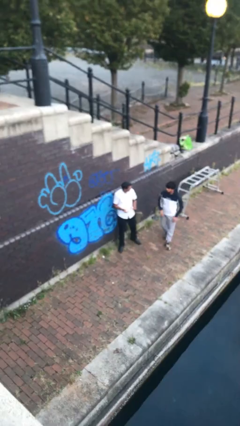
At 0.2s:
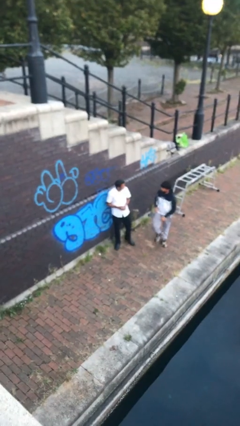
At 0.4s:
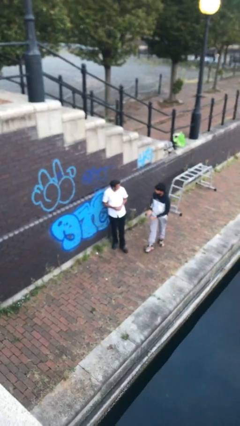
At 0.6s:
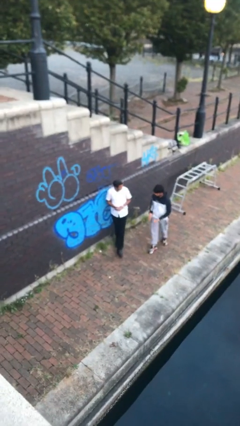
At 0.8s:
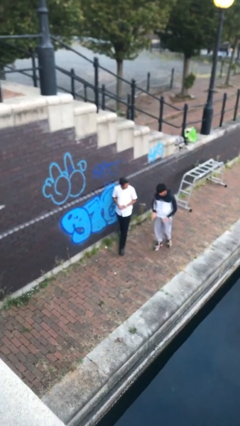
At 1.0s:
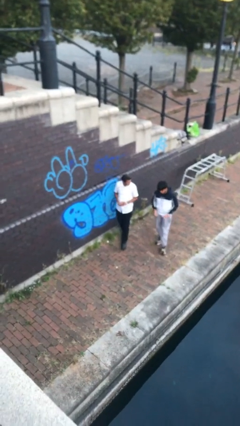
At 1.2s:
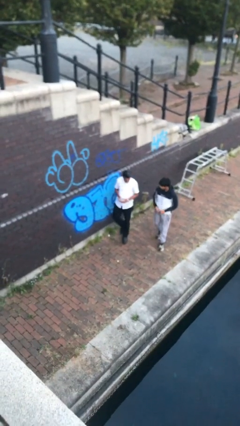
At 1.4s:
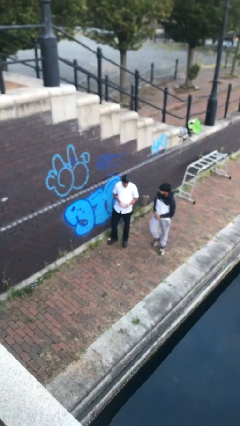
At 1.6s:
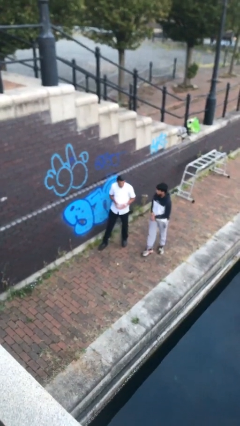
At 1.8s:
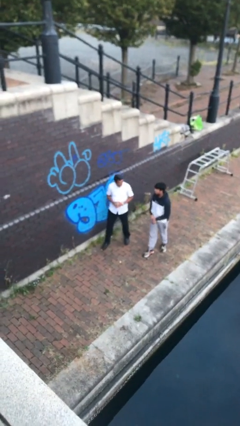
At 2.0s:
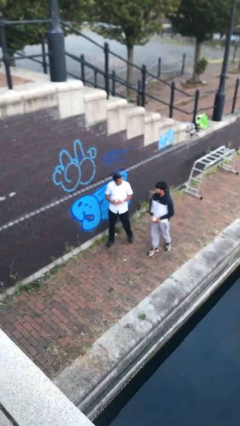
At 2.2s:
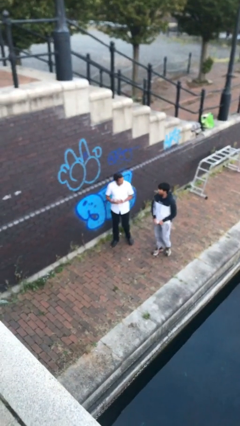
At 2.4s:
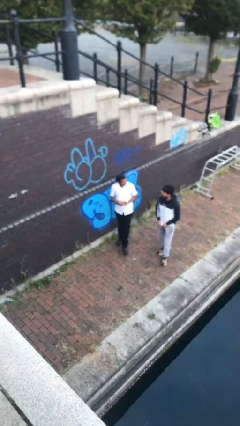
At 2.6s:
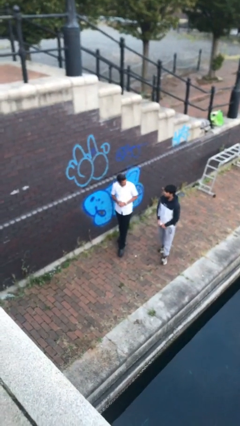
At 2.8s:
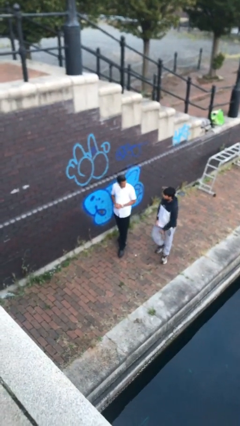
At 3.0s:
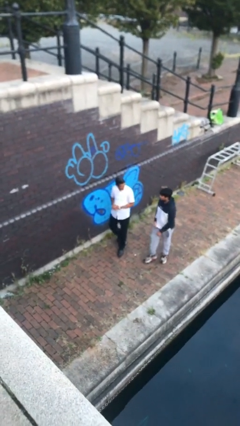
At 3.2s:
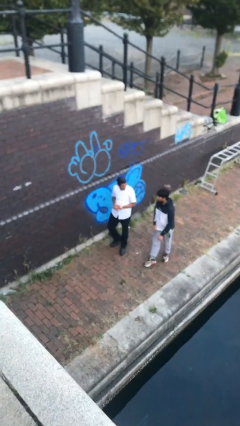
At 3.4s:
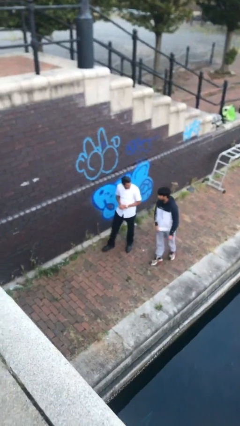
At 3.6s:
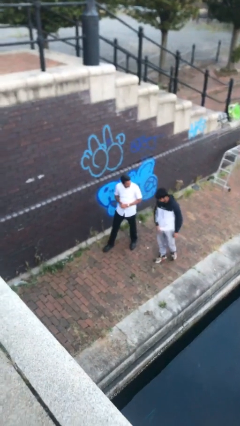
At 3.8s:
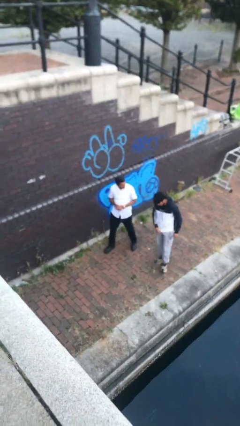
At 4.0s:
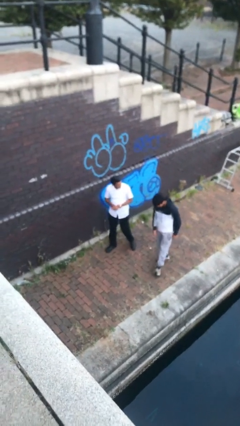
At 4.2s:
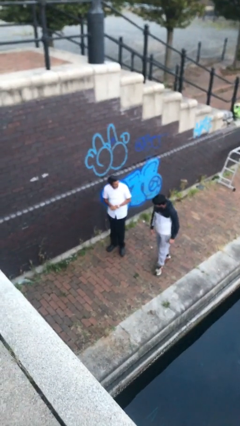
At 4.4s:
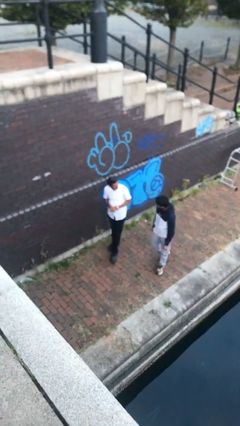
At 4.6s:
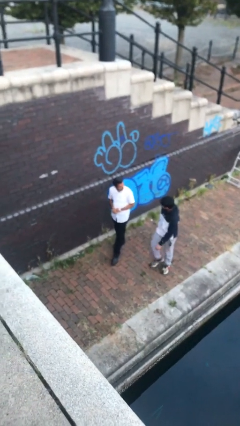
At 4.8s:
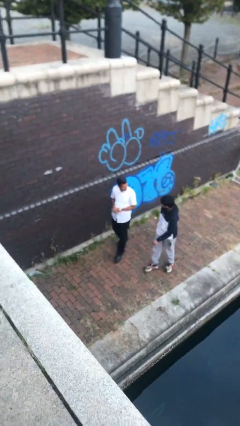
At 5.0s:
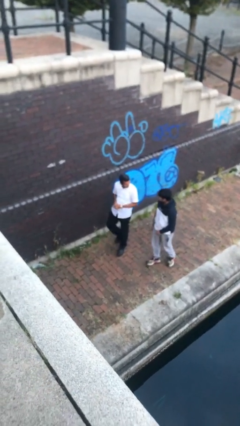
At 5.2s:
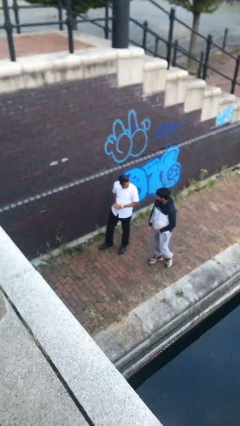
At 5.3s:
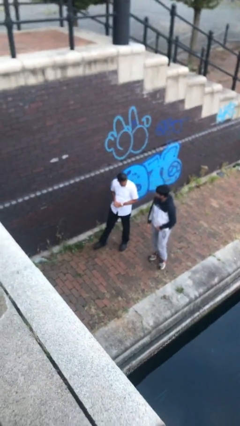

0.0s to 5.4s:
person talks to person

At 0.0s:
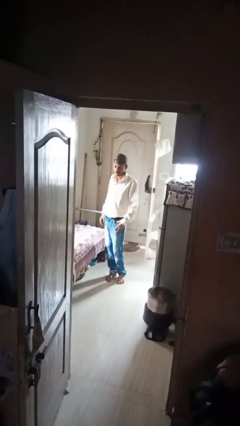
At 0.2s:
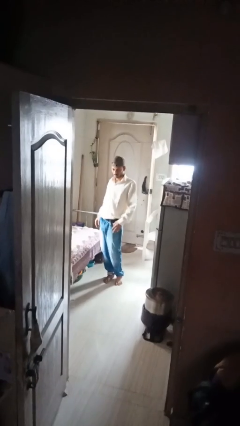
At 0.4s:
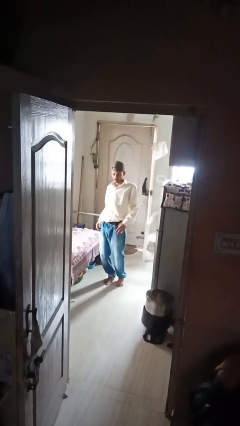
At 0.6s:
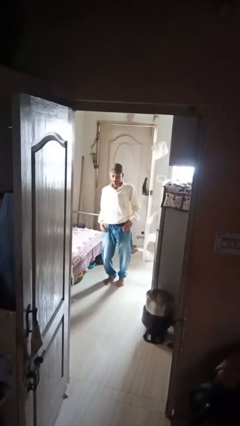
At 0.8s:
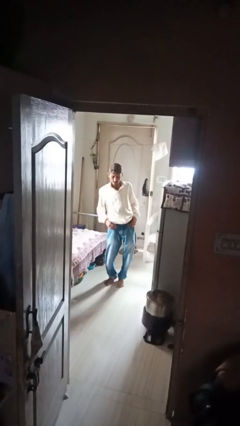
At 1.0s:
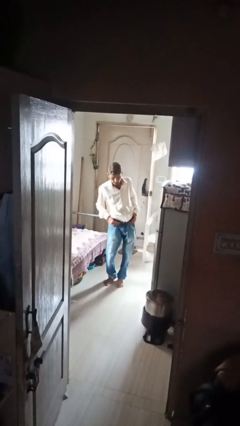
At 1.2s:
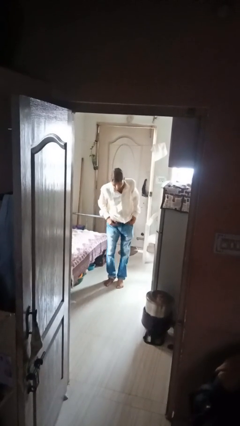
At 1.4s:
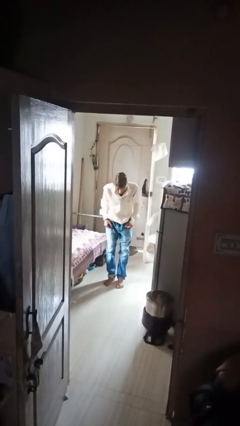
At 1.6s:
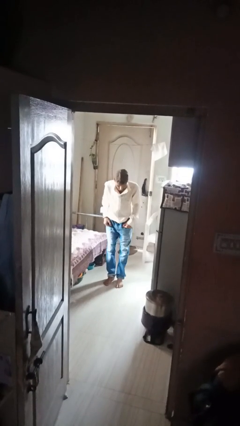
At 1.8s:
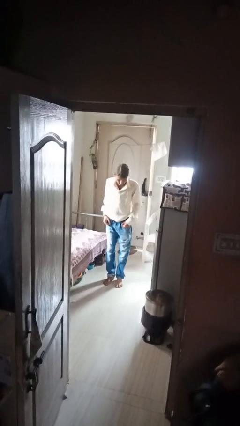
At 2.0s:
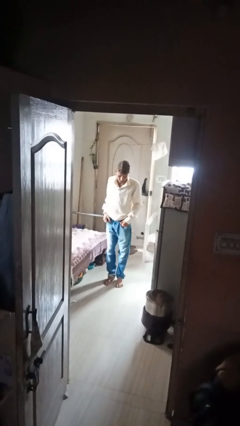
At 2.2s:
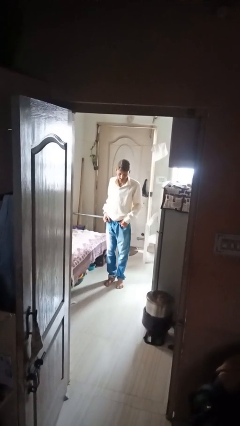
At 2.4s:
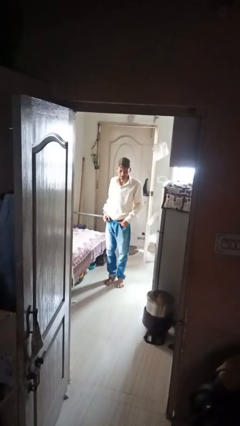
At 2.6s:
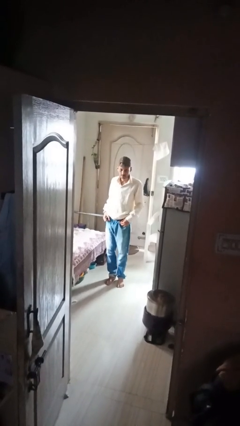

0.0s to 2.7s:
person wiggles hips

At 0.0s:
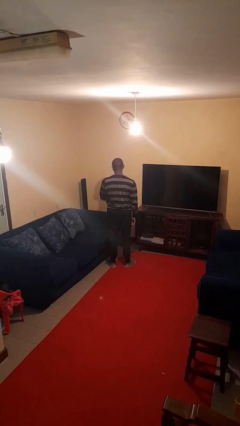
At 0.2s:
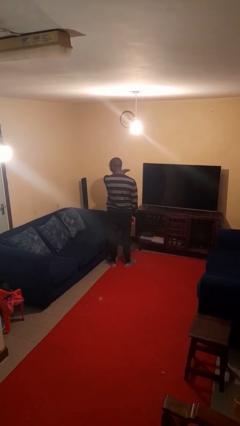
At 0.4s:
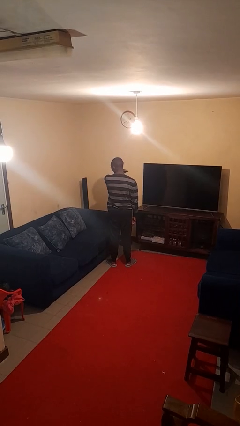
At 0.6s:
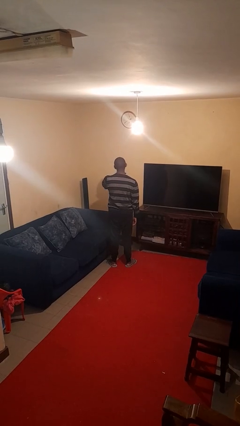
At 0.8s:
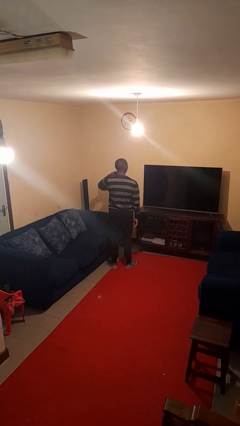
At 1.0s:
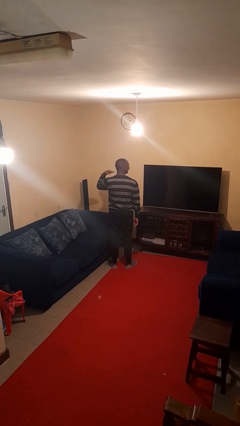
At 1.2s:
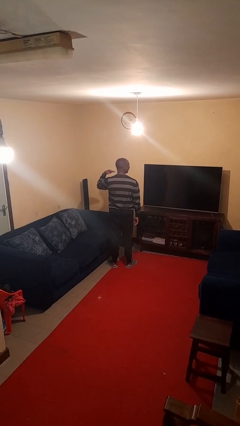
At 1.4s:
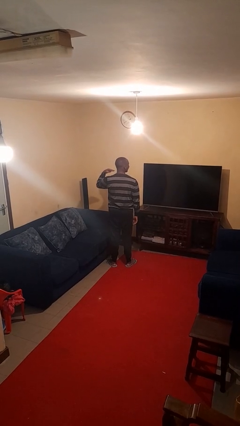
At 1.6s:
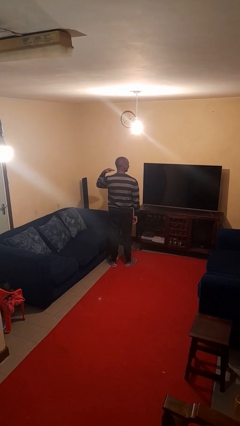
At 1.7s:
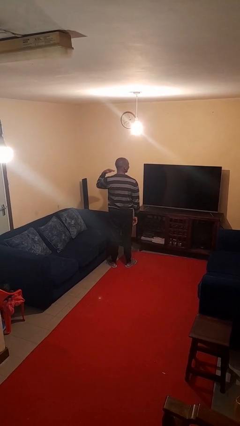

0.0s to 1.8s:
person gestures cut

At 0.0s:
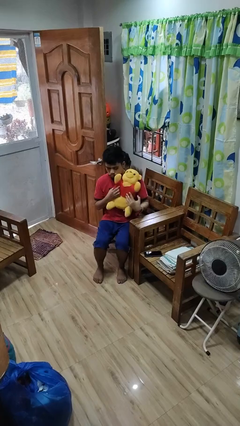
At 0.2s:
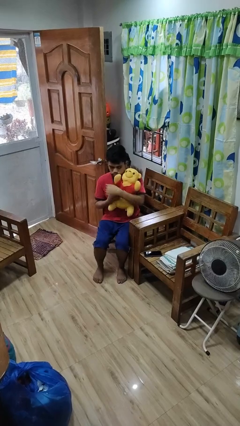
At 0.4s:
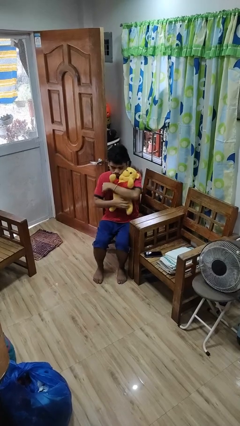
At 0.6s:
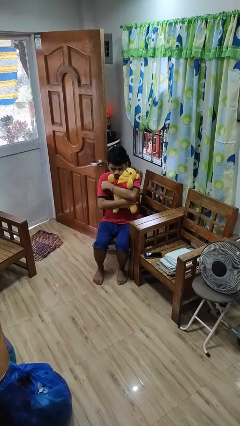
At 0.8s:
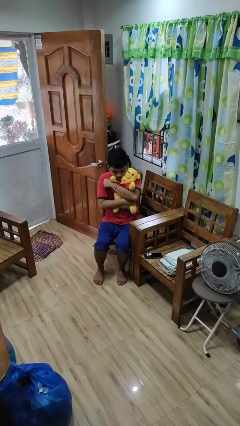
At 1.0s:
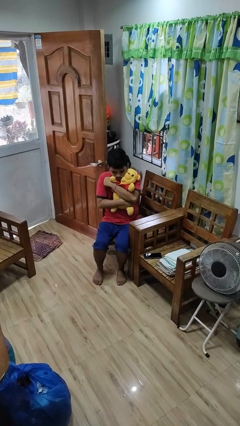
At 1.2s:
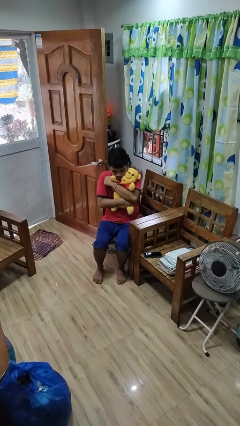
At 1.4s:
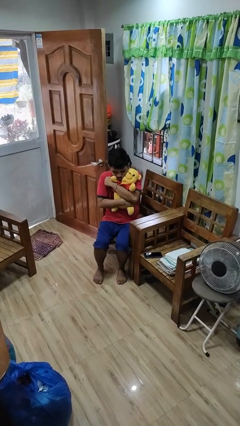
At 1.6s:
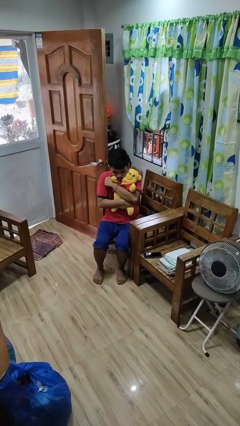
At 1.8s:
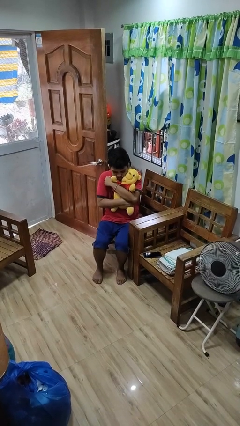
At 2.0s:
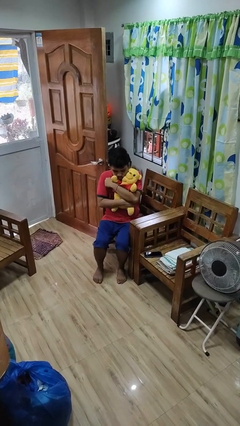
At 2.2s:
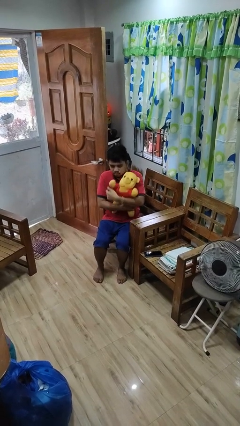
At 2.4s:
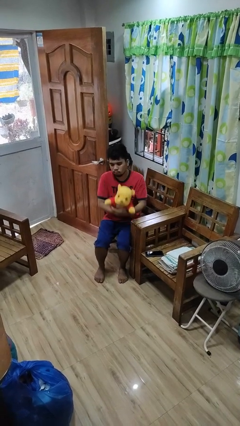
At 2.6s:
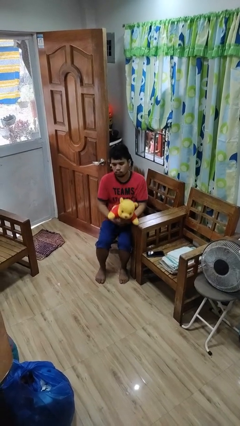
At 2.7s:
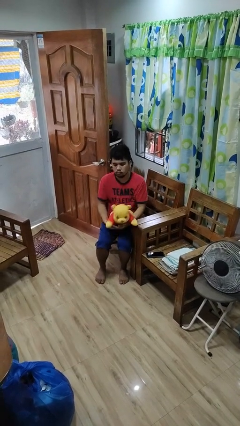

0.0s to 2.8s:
person hugs stuffed animal

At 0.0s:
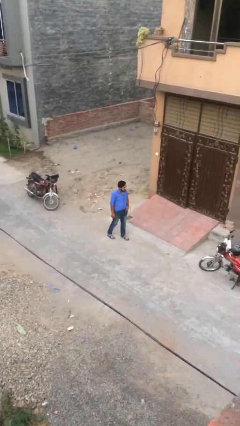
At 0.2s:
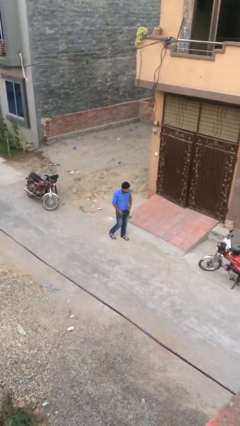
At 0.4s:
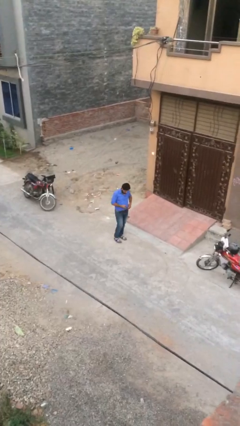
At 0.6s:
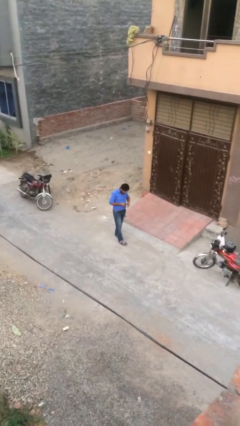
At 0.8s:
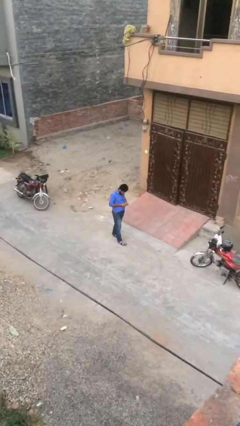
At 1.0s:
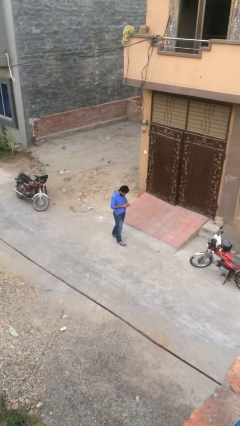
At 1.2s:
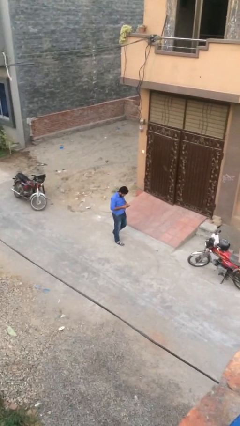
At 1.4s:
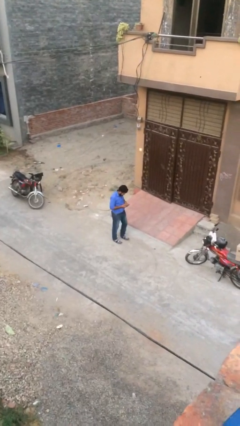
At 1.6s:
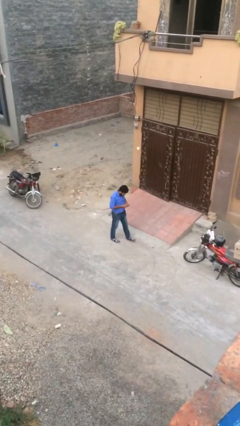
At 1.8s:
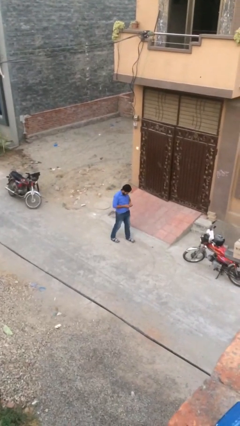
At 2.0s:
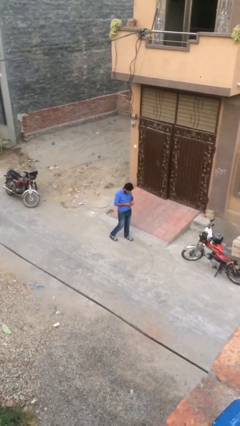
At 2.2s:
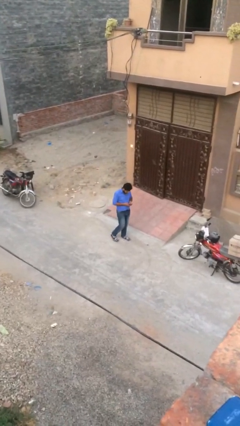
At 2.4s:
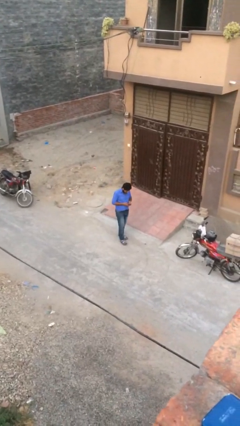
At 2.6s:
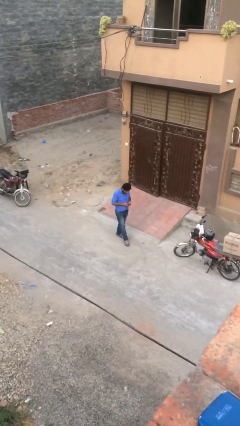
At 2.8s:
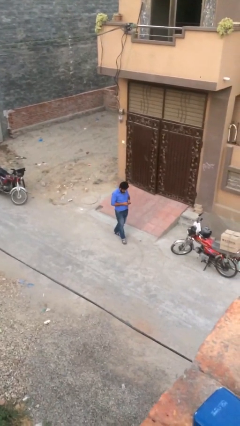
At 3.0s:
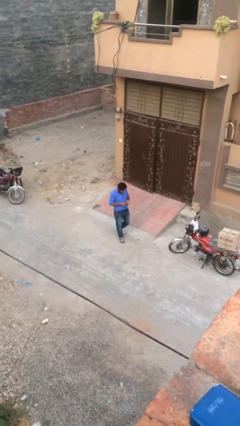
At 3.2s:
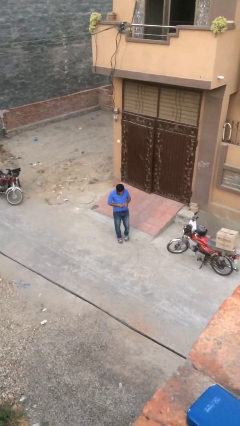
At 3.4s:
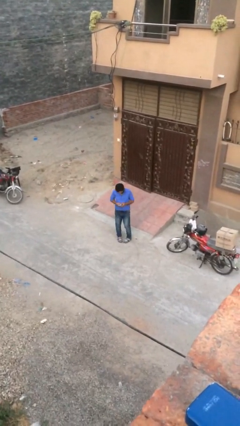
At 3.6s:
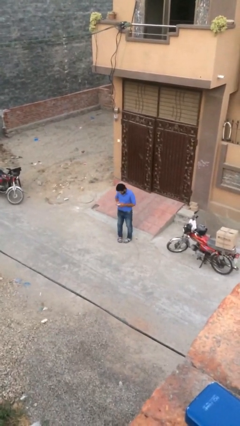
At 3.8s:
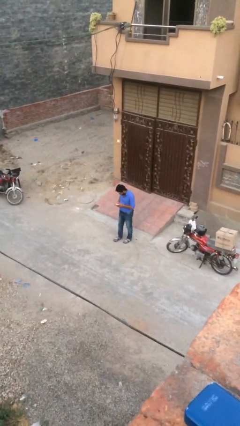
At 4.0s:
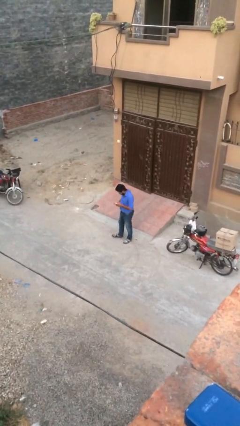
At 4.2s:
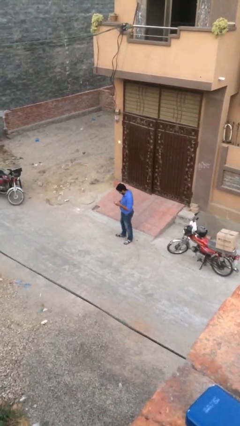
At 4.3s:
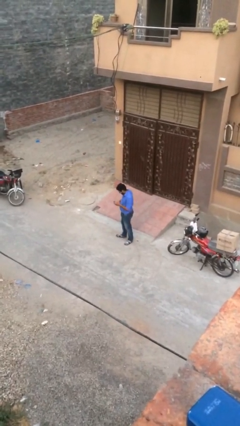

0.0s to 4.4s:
person texts on phone

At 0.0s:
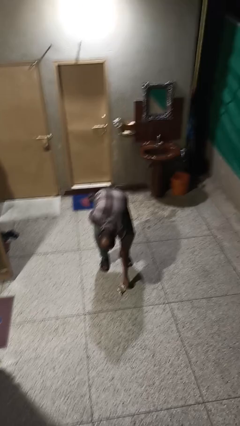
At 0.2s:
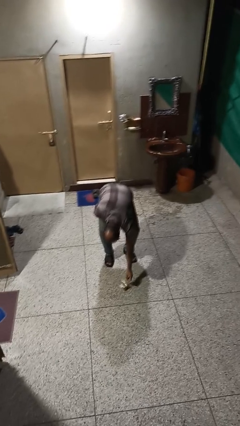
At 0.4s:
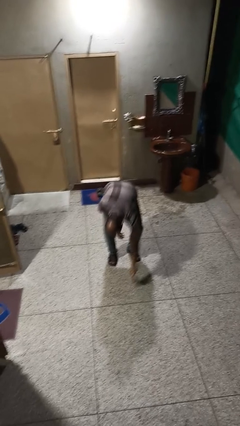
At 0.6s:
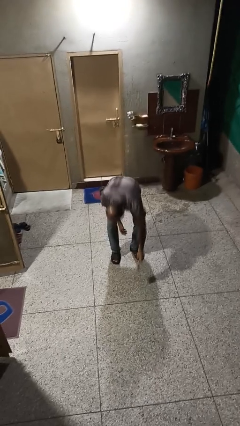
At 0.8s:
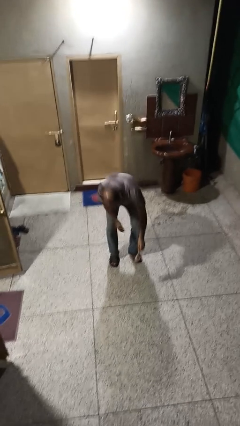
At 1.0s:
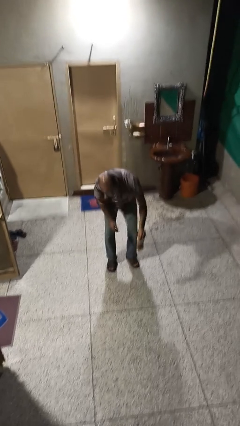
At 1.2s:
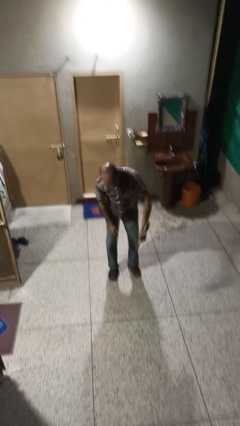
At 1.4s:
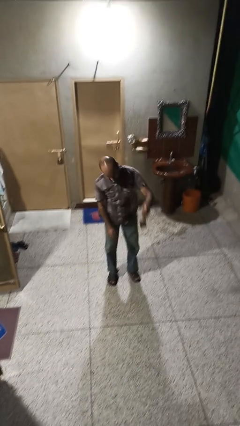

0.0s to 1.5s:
person picks up object from floor
